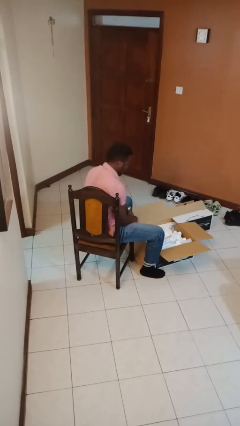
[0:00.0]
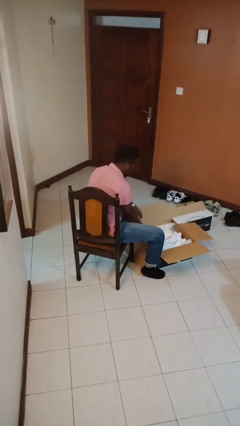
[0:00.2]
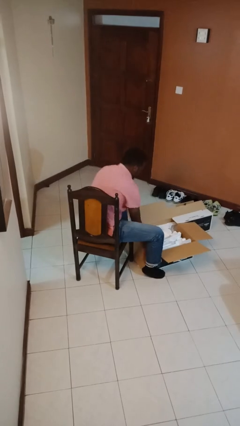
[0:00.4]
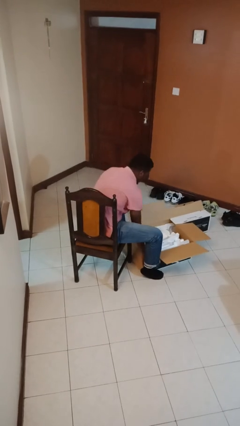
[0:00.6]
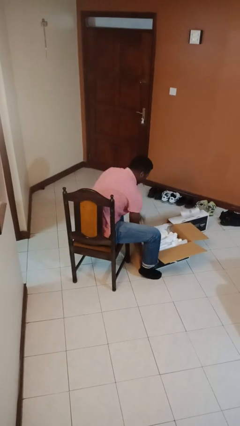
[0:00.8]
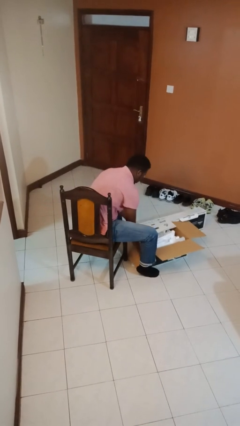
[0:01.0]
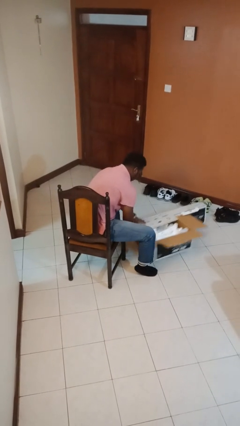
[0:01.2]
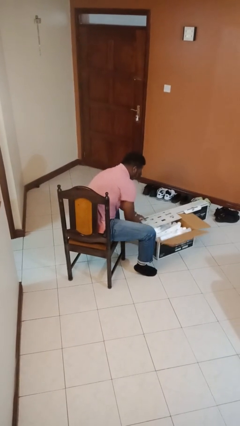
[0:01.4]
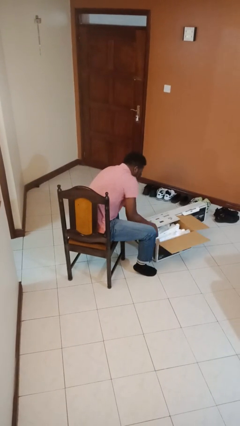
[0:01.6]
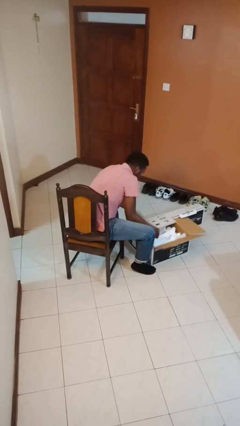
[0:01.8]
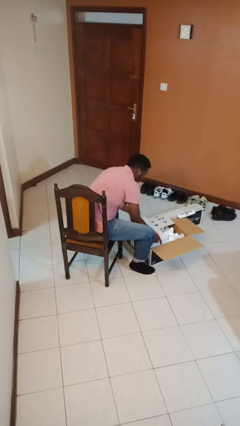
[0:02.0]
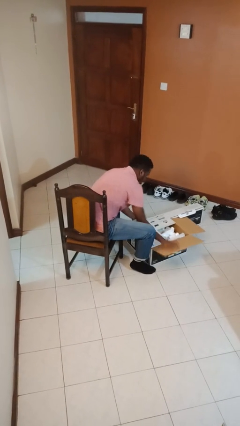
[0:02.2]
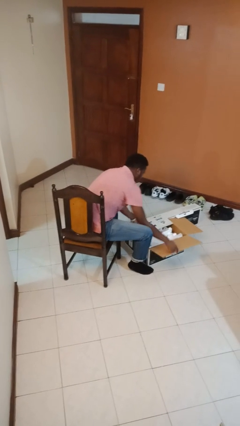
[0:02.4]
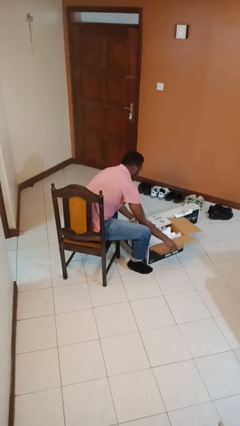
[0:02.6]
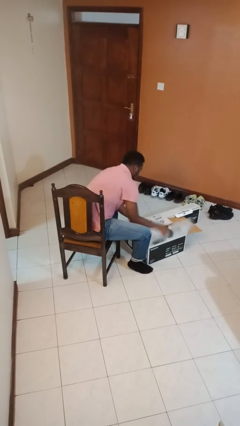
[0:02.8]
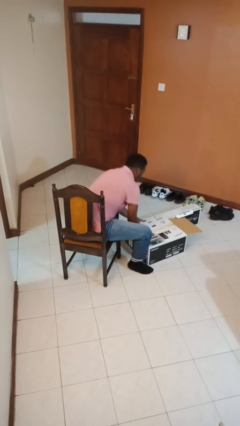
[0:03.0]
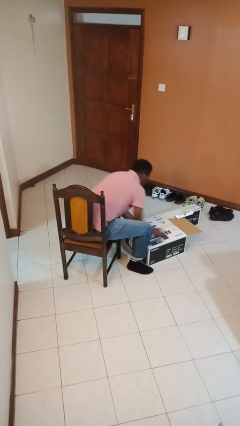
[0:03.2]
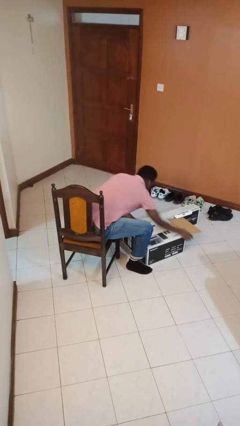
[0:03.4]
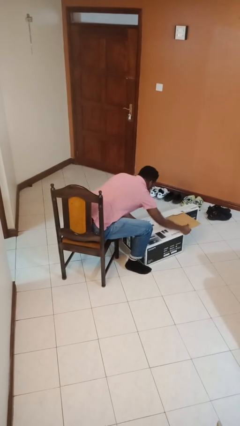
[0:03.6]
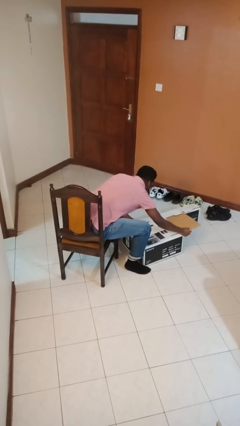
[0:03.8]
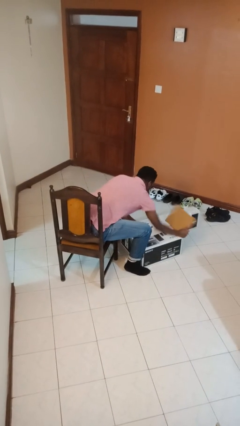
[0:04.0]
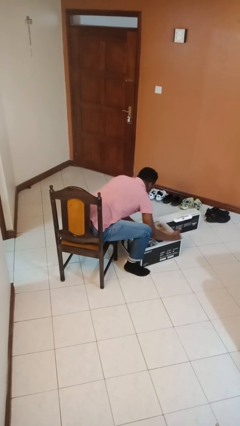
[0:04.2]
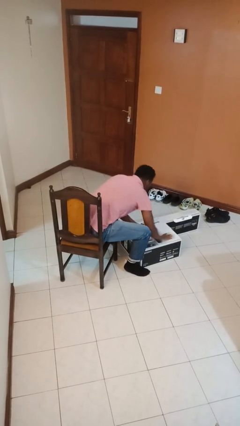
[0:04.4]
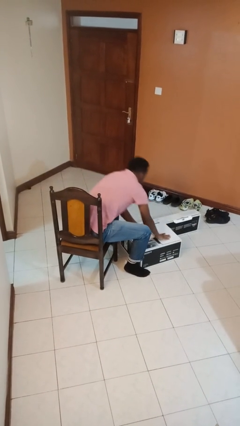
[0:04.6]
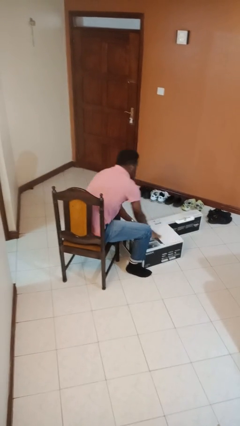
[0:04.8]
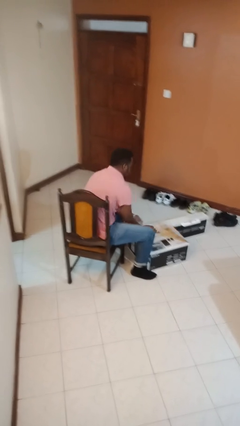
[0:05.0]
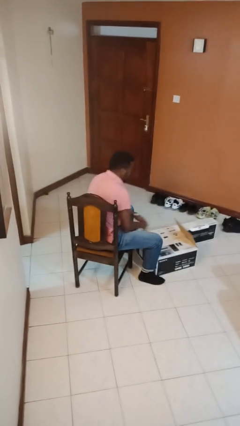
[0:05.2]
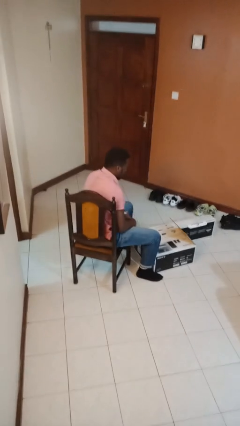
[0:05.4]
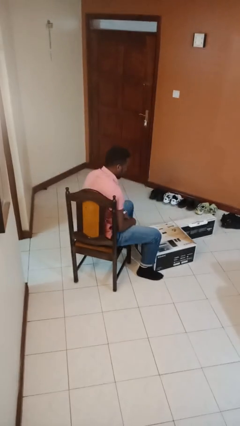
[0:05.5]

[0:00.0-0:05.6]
person closes box

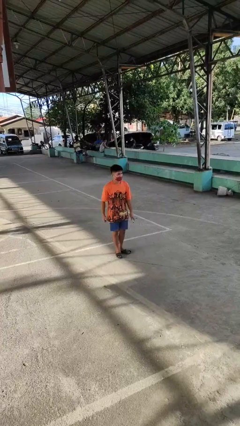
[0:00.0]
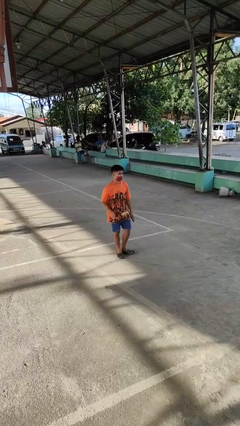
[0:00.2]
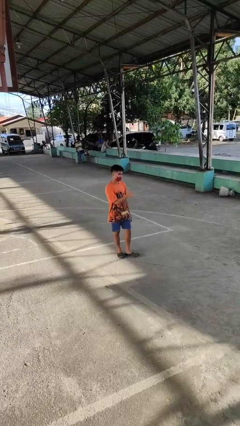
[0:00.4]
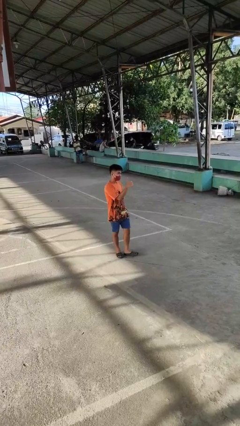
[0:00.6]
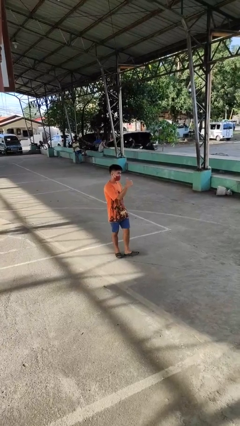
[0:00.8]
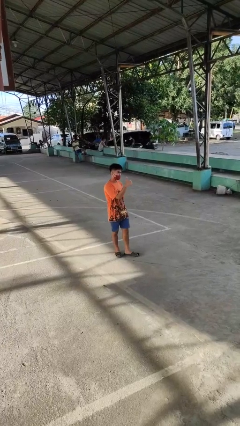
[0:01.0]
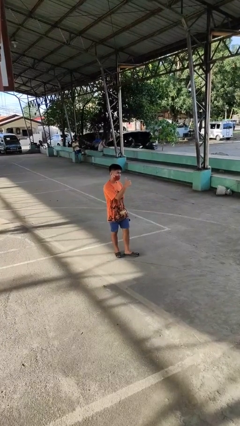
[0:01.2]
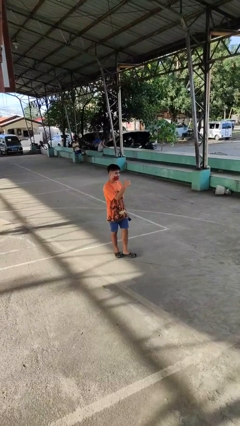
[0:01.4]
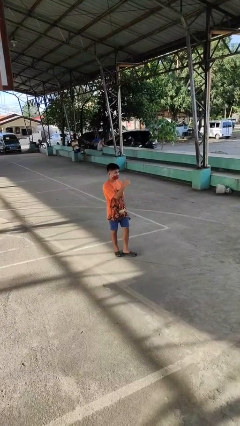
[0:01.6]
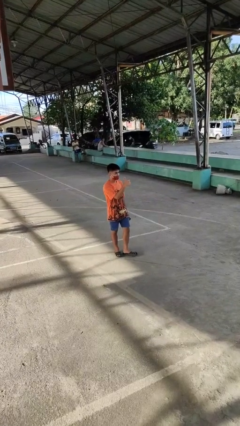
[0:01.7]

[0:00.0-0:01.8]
person gestures thumbs up

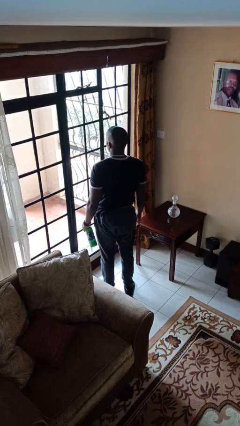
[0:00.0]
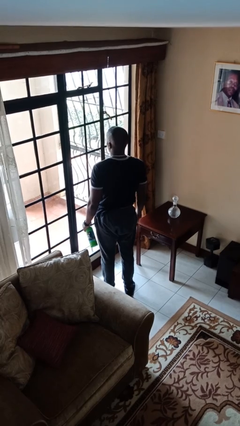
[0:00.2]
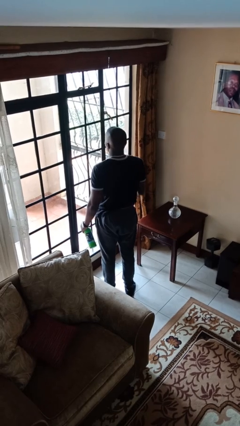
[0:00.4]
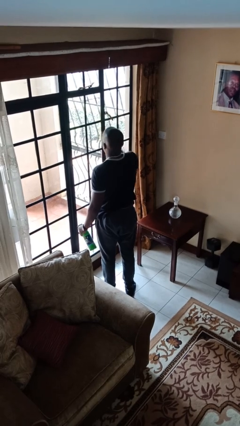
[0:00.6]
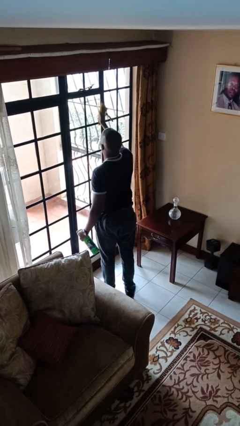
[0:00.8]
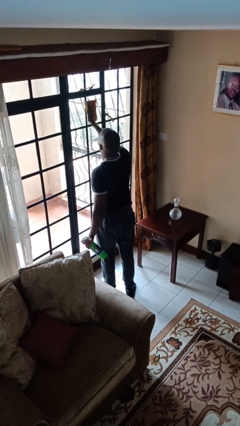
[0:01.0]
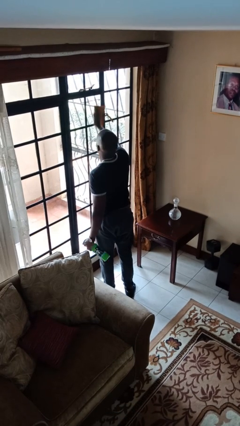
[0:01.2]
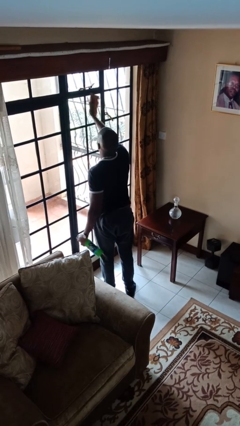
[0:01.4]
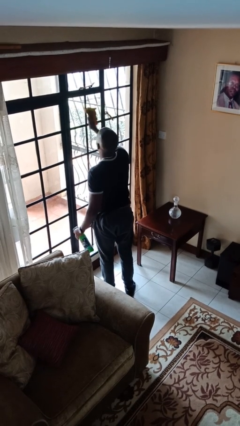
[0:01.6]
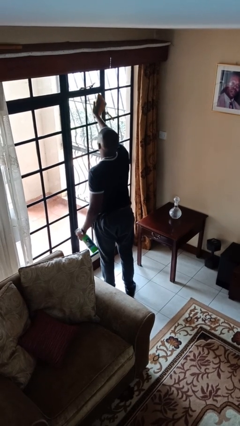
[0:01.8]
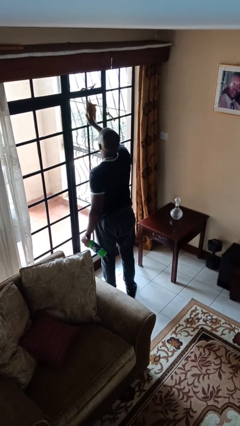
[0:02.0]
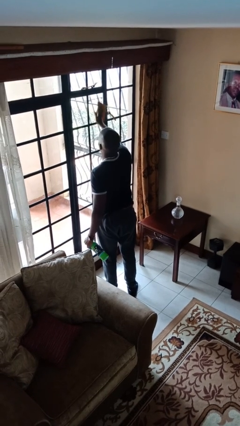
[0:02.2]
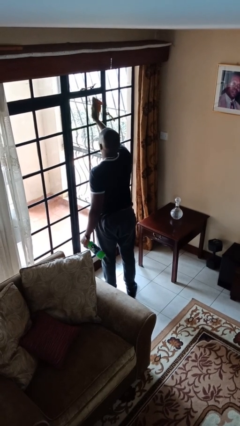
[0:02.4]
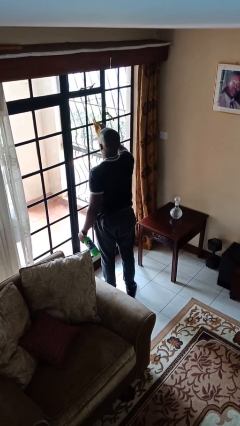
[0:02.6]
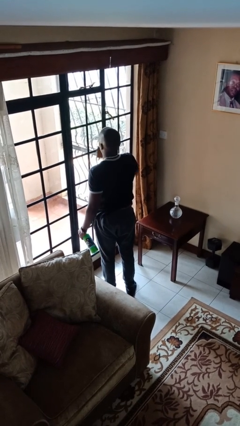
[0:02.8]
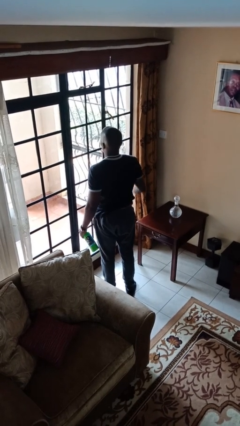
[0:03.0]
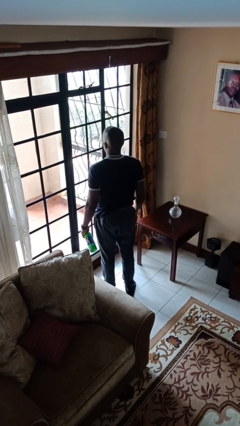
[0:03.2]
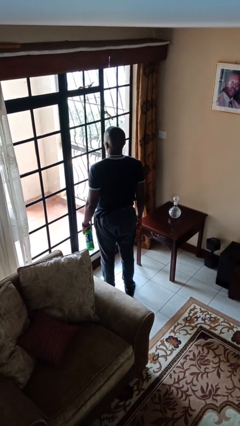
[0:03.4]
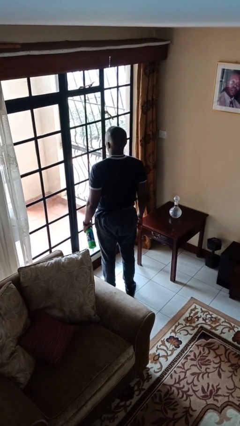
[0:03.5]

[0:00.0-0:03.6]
person washes window

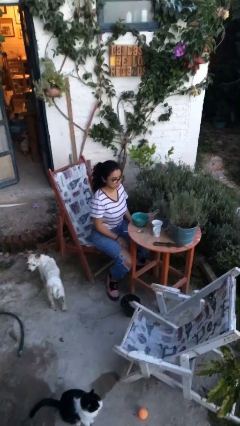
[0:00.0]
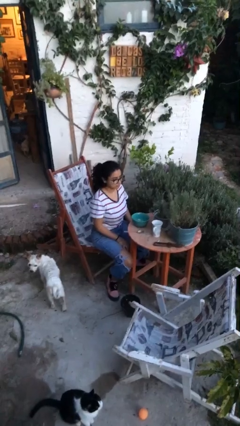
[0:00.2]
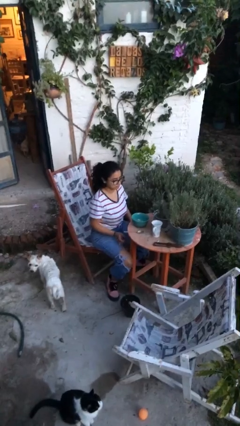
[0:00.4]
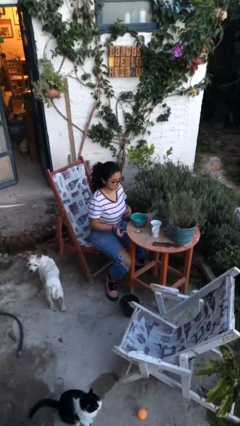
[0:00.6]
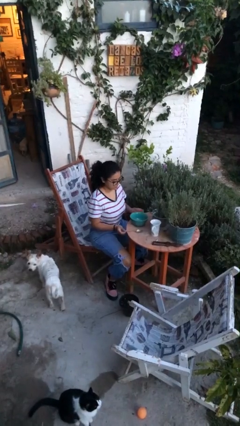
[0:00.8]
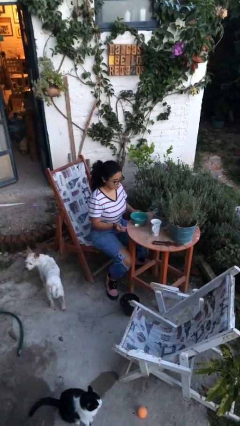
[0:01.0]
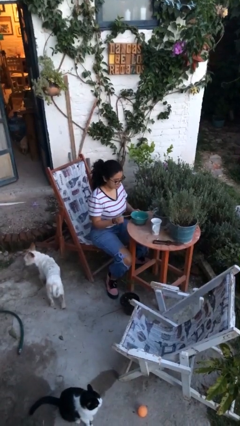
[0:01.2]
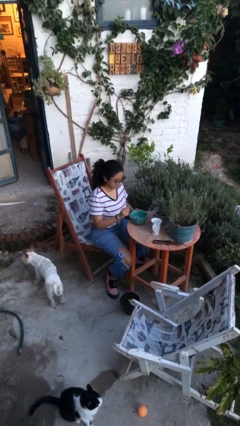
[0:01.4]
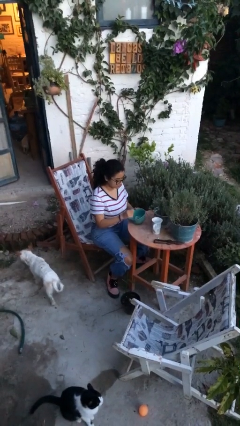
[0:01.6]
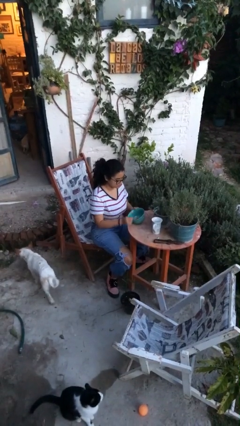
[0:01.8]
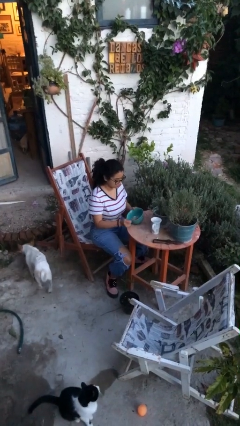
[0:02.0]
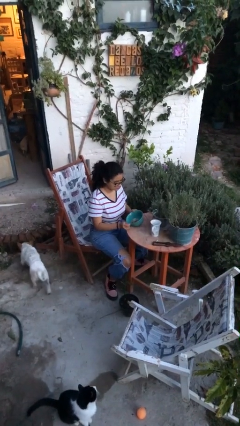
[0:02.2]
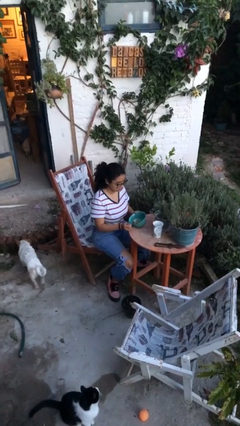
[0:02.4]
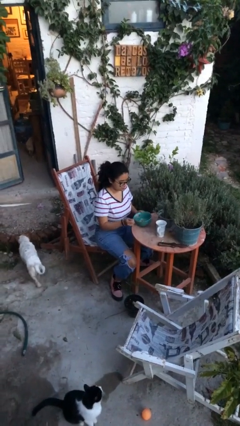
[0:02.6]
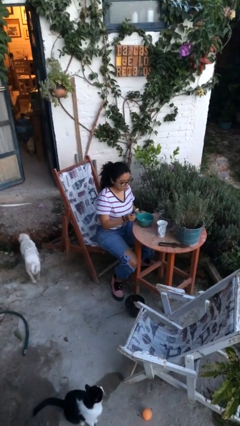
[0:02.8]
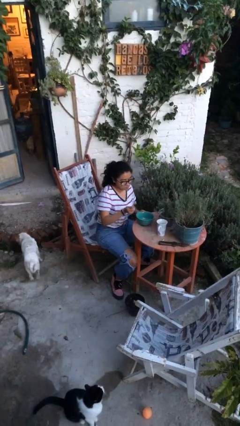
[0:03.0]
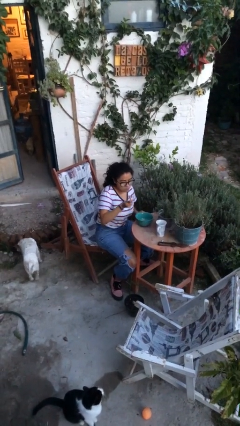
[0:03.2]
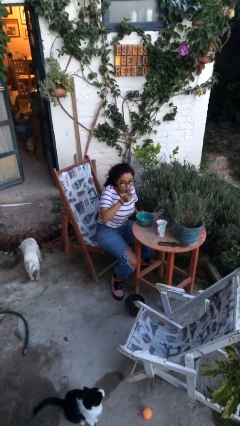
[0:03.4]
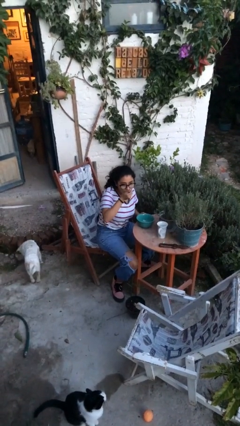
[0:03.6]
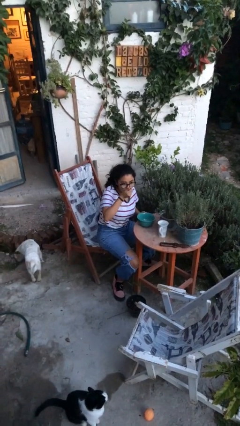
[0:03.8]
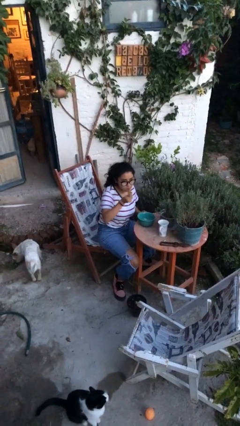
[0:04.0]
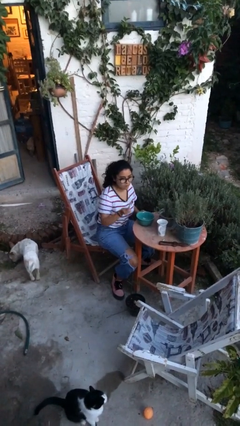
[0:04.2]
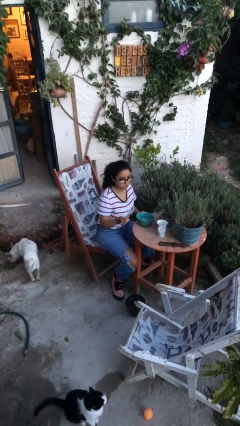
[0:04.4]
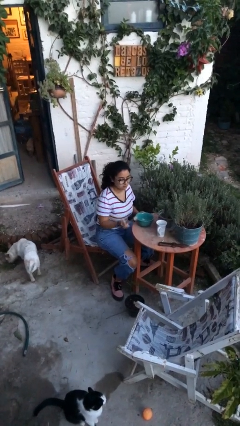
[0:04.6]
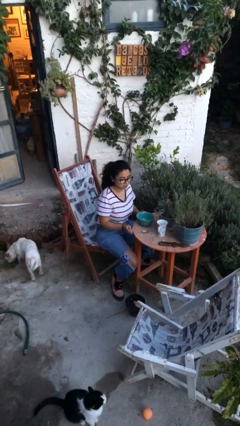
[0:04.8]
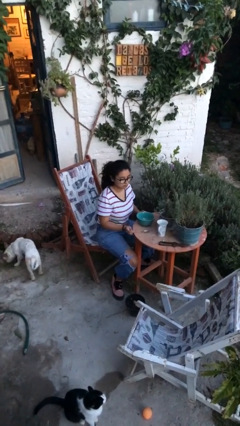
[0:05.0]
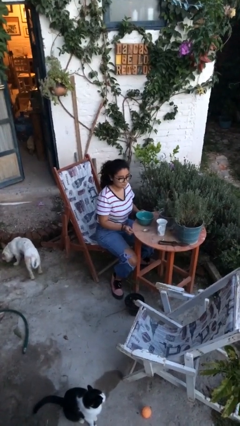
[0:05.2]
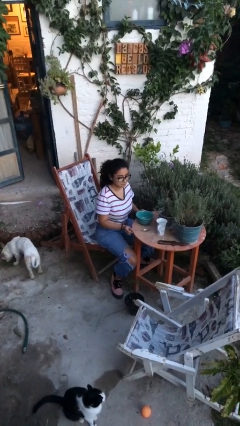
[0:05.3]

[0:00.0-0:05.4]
person eats with utensil

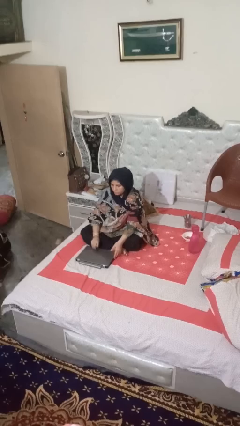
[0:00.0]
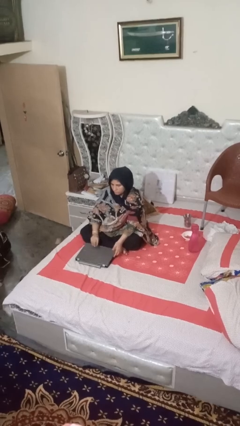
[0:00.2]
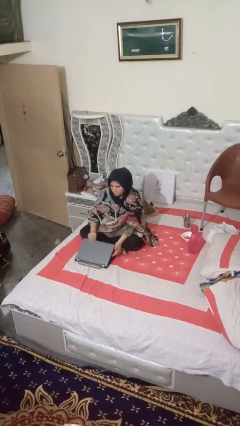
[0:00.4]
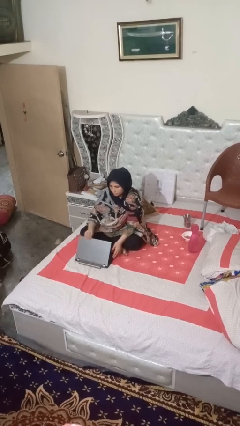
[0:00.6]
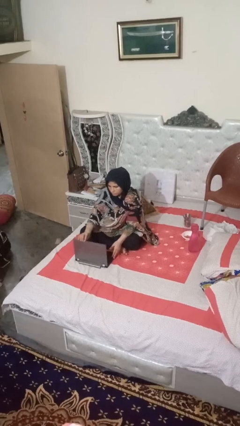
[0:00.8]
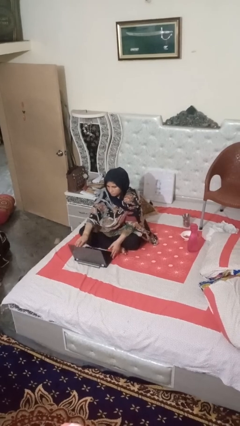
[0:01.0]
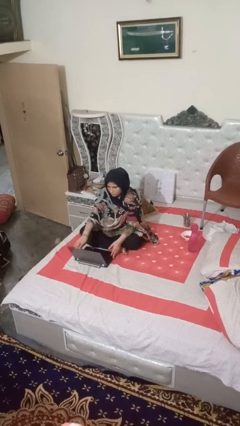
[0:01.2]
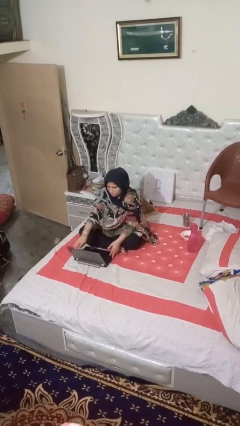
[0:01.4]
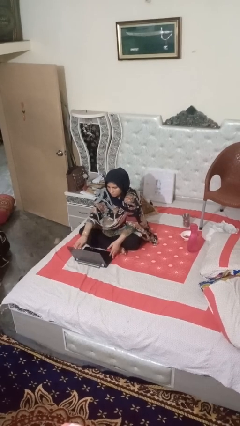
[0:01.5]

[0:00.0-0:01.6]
person opens laptop
